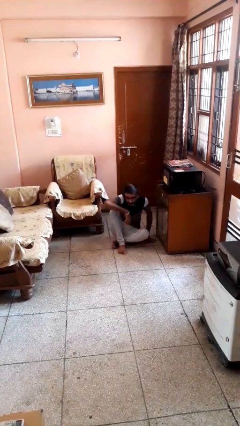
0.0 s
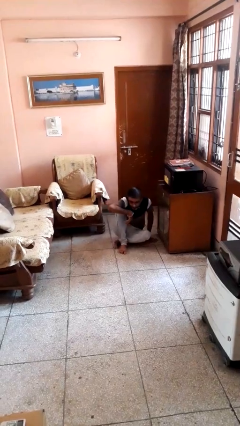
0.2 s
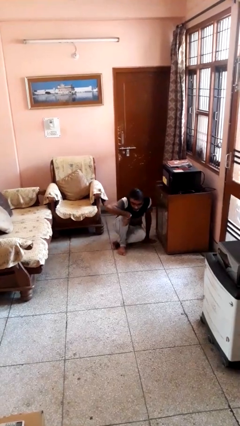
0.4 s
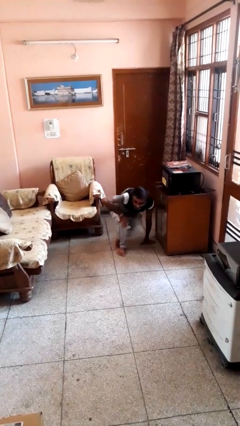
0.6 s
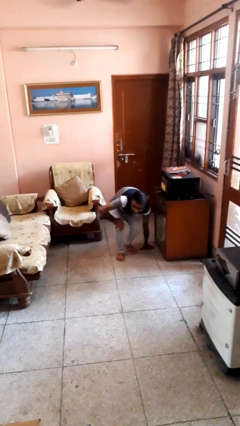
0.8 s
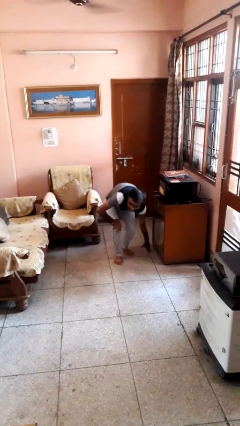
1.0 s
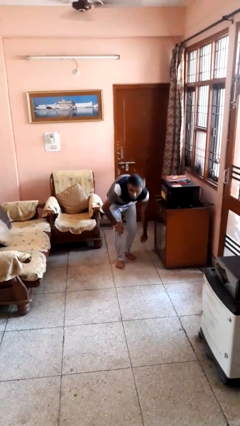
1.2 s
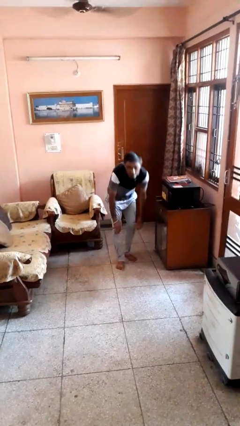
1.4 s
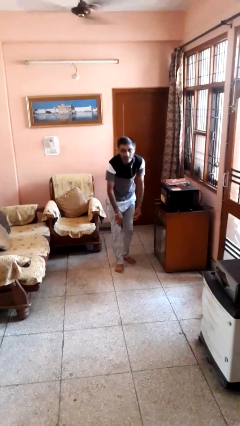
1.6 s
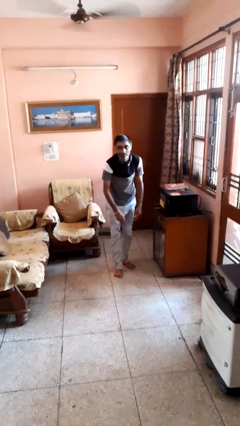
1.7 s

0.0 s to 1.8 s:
person stands up from floor

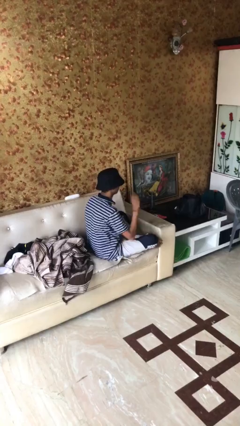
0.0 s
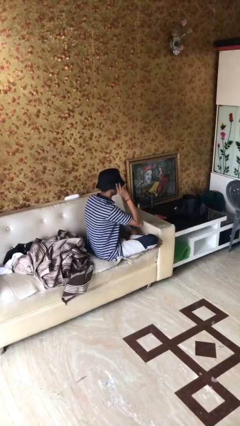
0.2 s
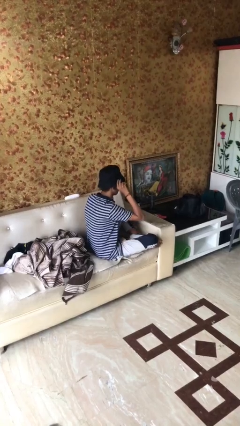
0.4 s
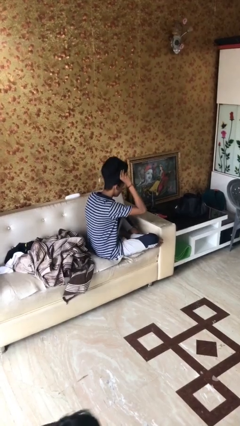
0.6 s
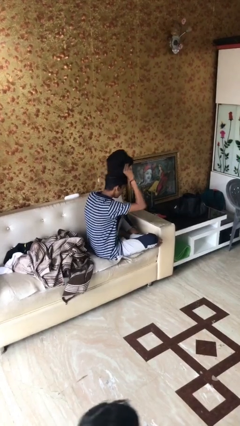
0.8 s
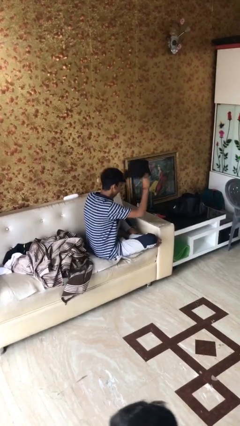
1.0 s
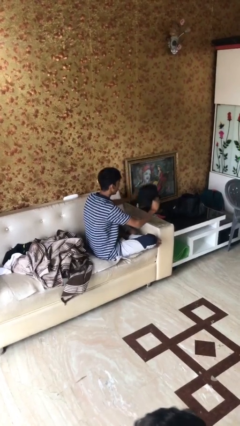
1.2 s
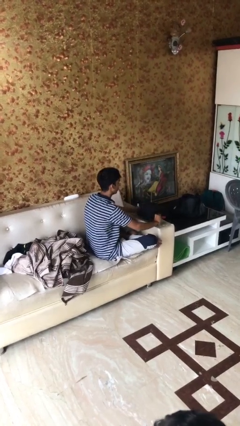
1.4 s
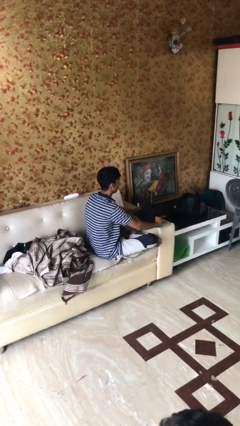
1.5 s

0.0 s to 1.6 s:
person takes off hat

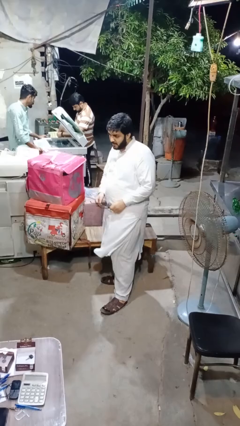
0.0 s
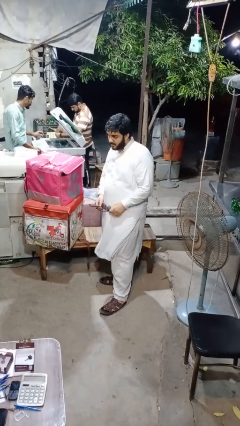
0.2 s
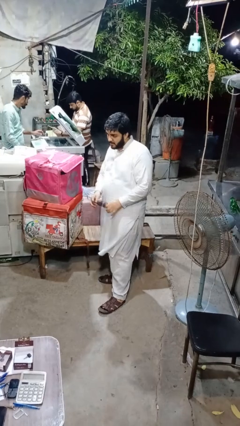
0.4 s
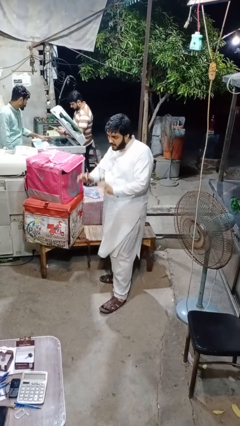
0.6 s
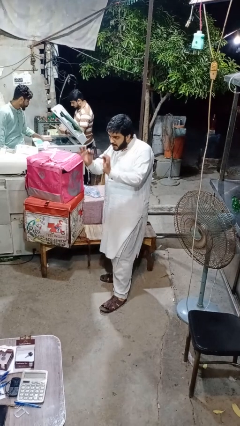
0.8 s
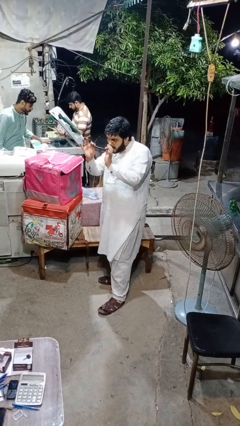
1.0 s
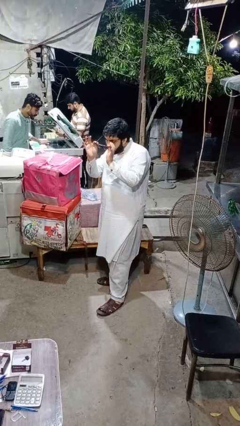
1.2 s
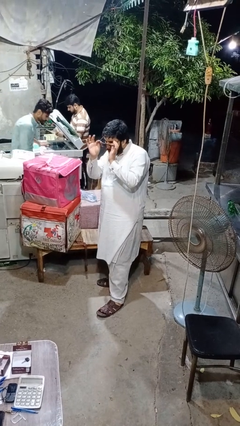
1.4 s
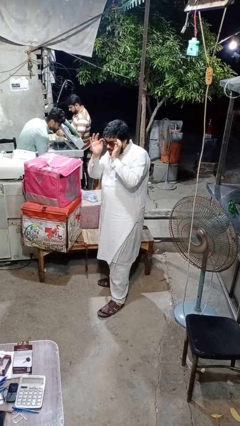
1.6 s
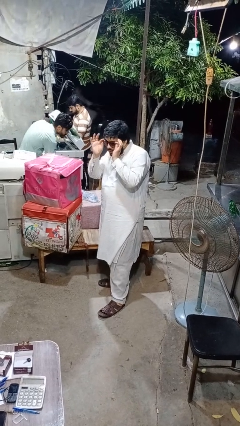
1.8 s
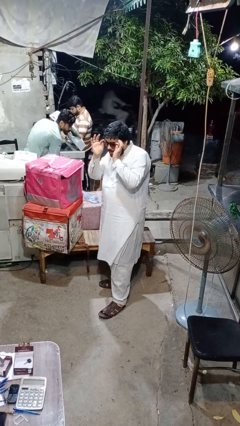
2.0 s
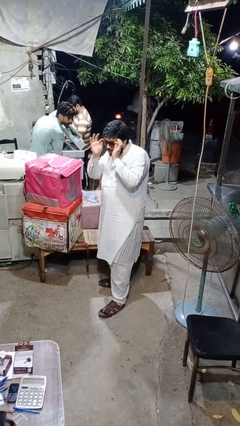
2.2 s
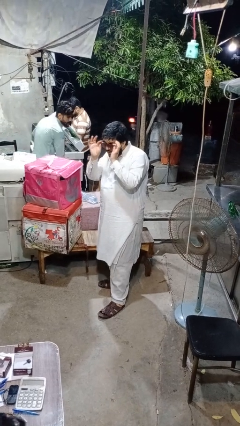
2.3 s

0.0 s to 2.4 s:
person puts on glasses

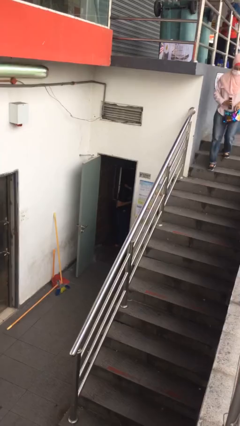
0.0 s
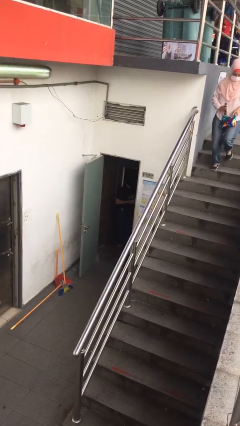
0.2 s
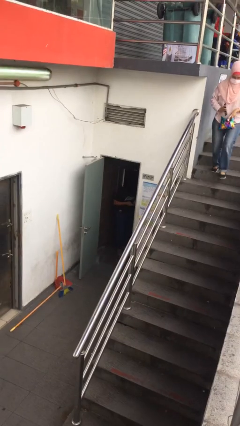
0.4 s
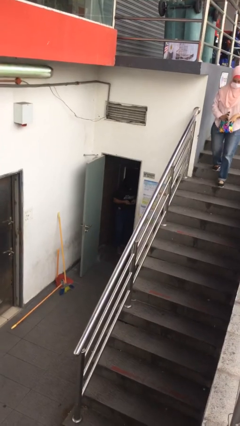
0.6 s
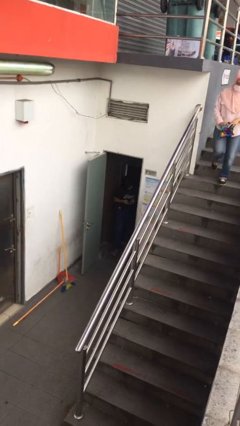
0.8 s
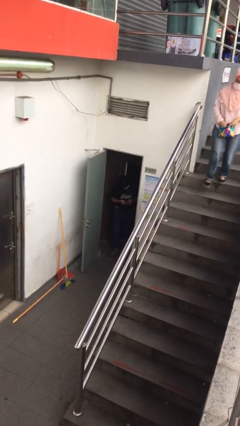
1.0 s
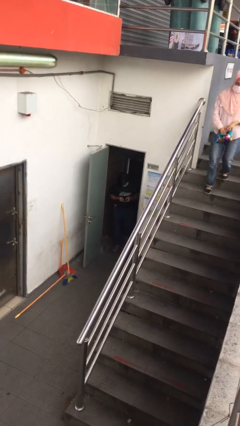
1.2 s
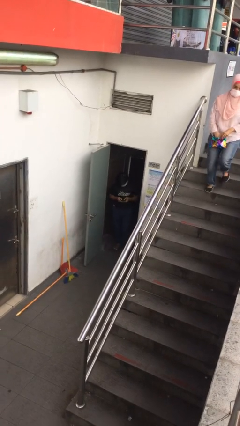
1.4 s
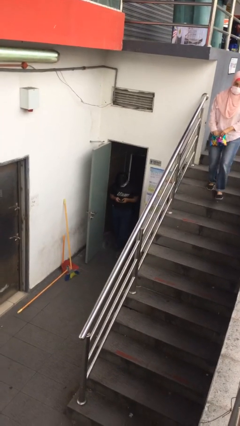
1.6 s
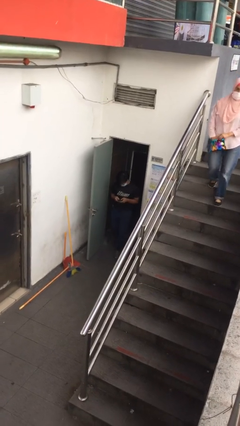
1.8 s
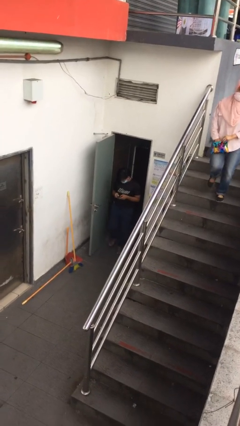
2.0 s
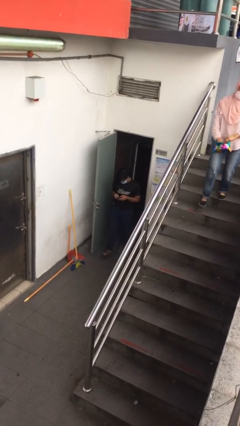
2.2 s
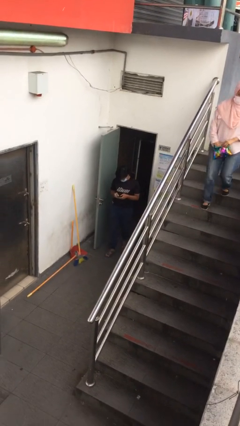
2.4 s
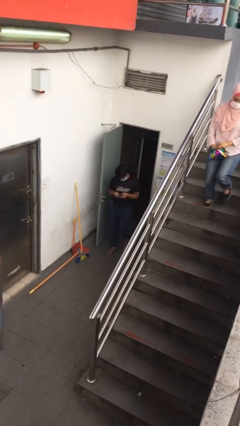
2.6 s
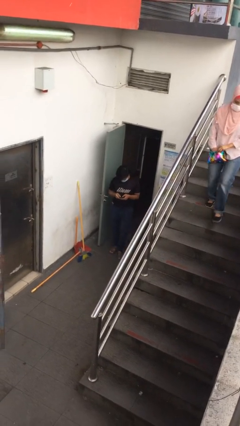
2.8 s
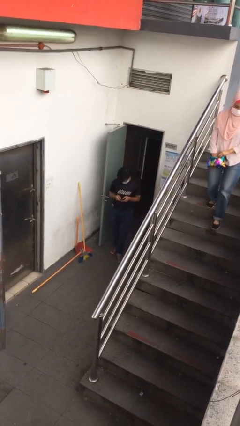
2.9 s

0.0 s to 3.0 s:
person enters scene through structure

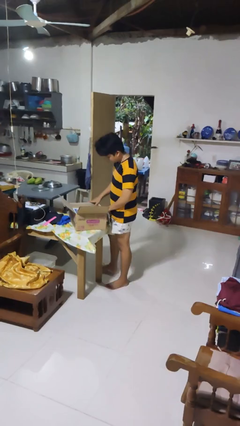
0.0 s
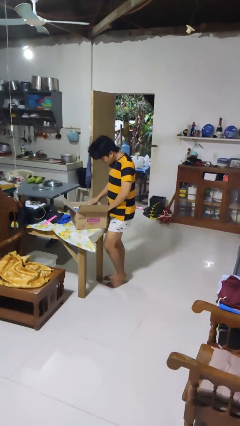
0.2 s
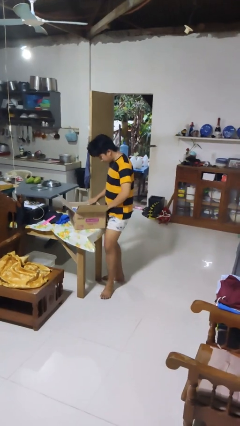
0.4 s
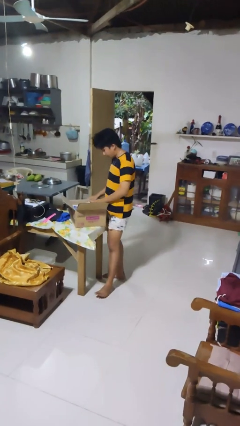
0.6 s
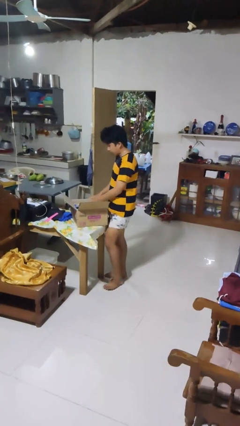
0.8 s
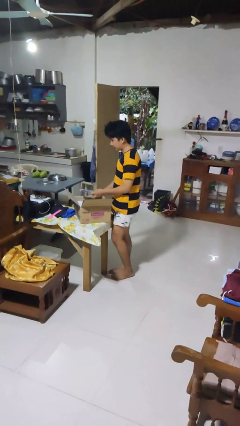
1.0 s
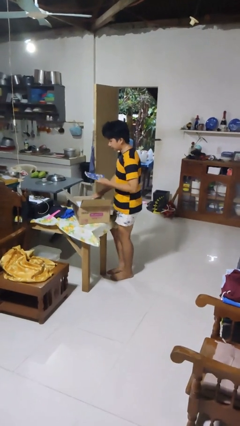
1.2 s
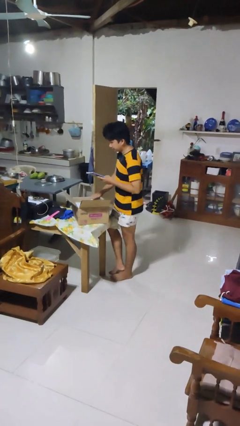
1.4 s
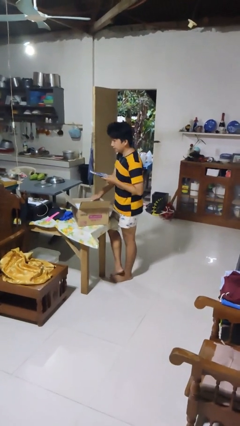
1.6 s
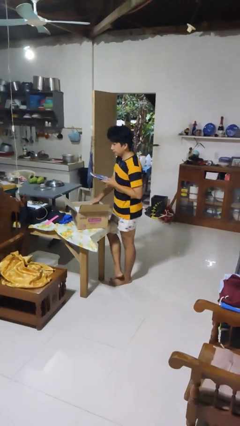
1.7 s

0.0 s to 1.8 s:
person takes object from box

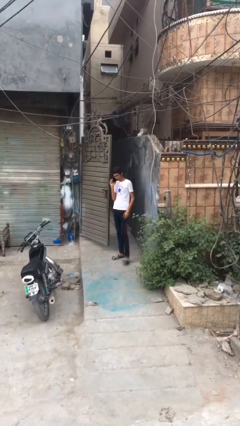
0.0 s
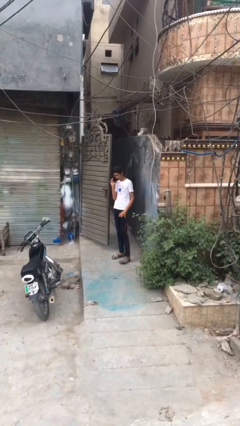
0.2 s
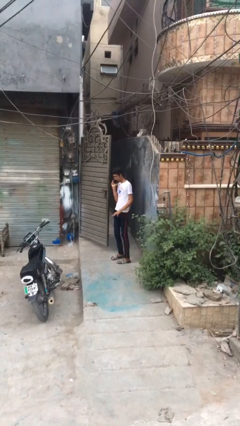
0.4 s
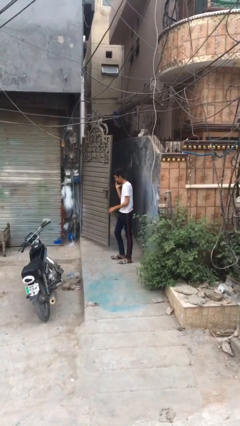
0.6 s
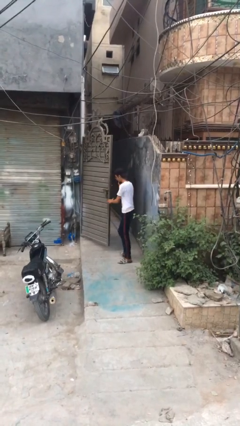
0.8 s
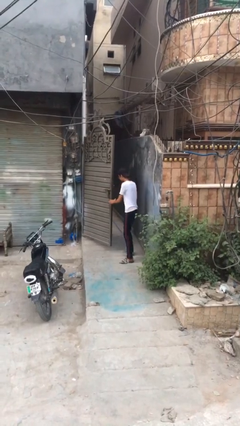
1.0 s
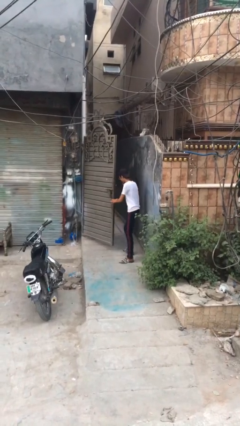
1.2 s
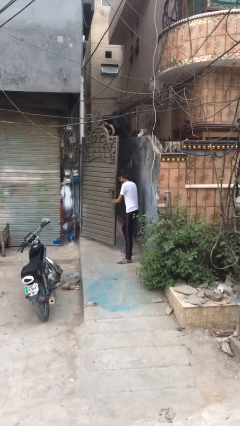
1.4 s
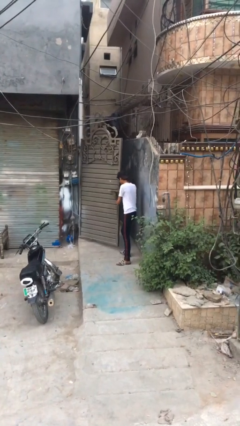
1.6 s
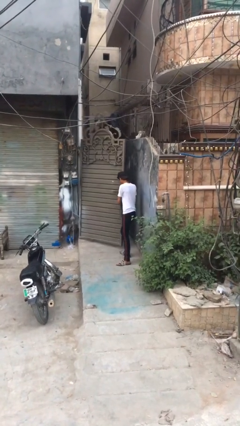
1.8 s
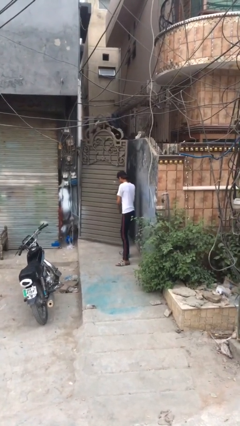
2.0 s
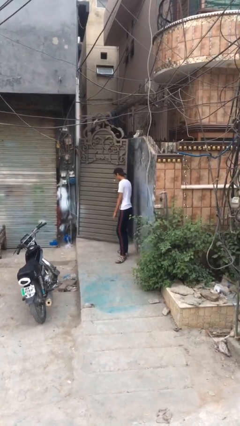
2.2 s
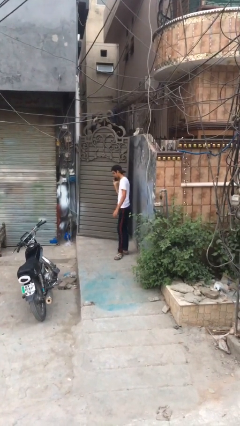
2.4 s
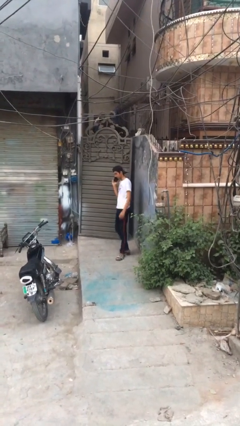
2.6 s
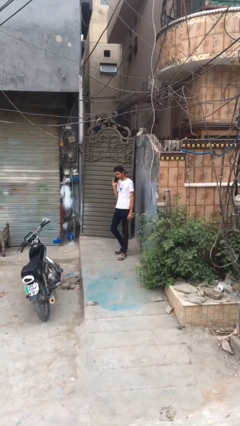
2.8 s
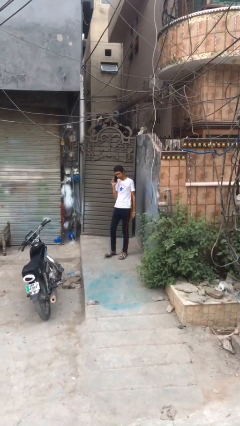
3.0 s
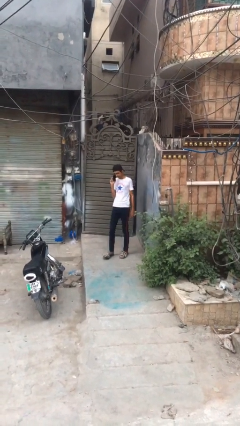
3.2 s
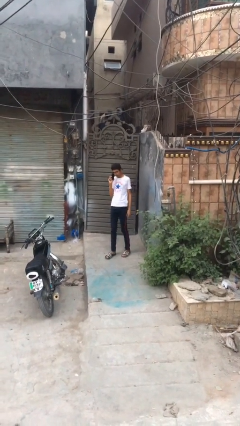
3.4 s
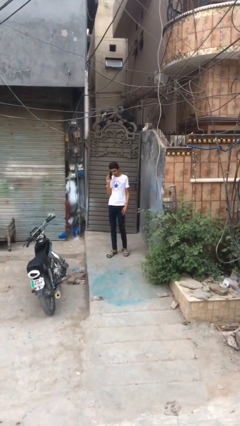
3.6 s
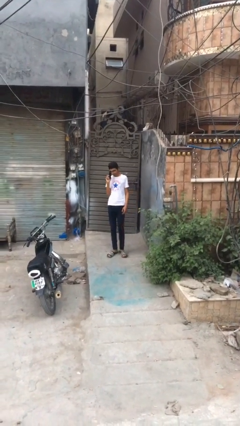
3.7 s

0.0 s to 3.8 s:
person closes facility door

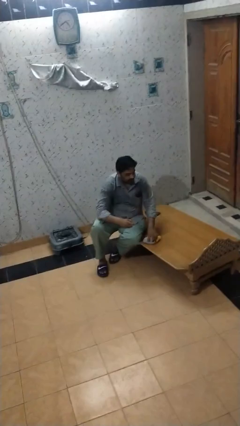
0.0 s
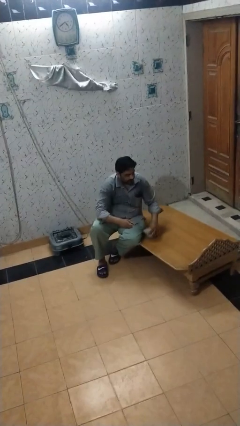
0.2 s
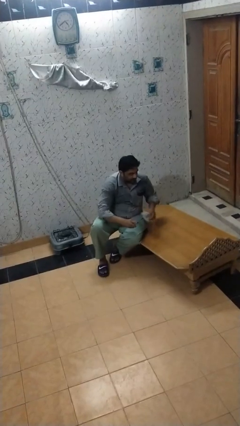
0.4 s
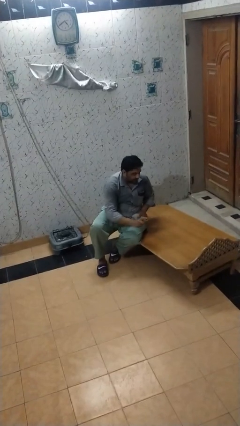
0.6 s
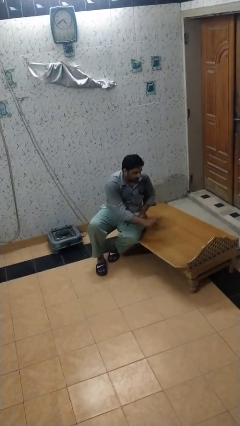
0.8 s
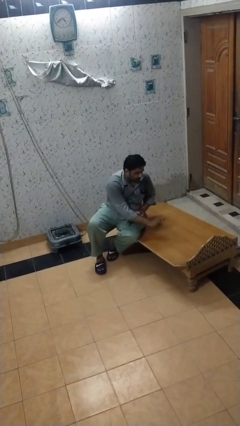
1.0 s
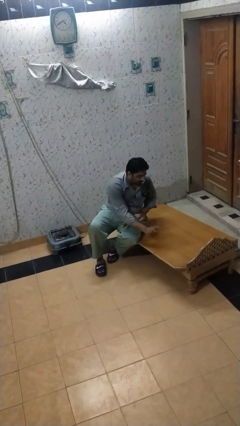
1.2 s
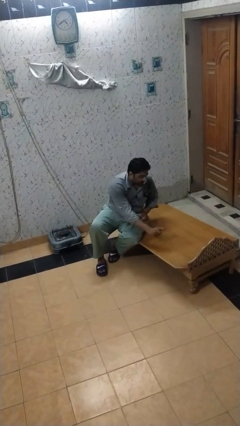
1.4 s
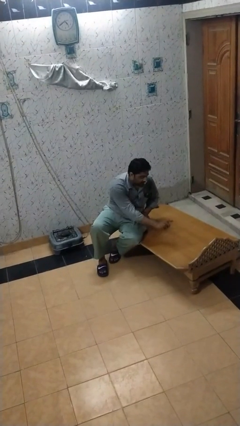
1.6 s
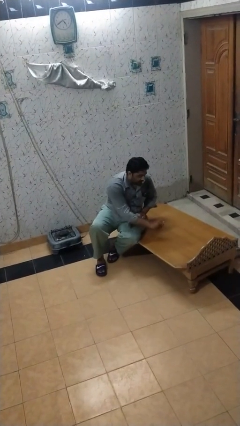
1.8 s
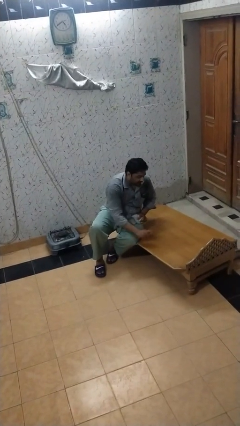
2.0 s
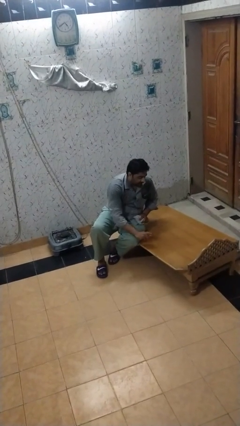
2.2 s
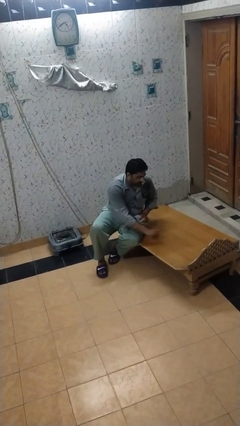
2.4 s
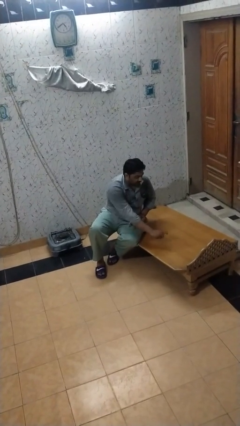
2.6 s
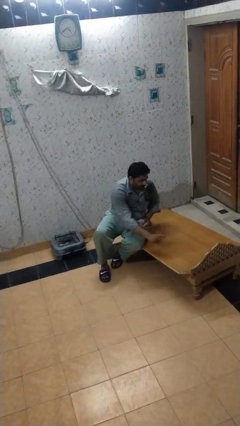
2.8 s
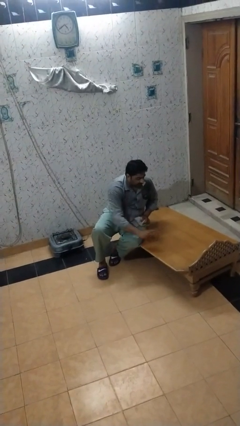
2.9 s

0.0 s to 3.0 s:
person sprays from bottle
